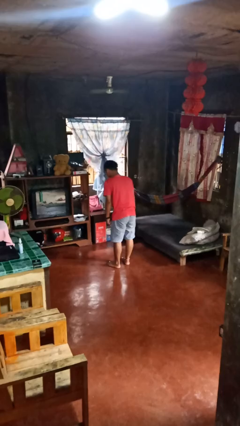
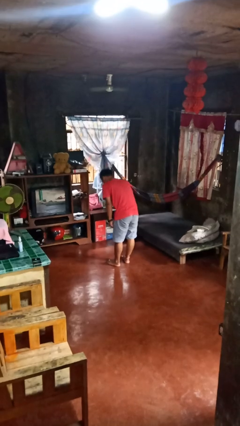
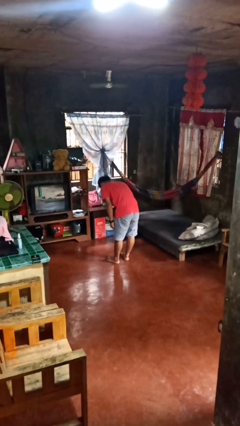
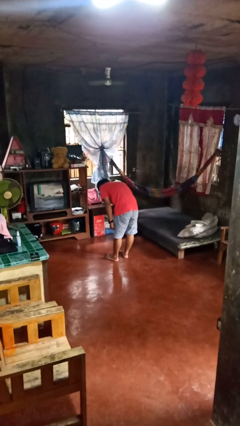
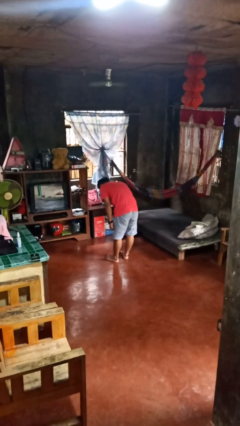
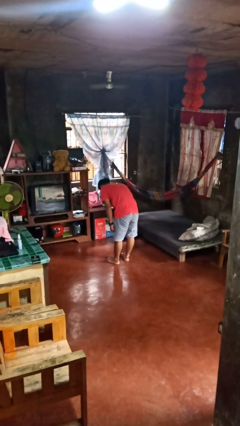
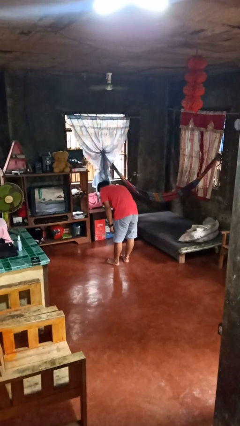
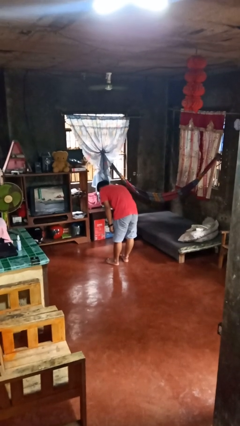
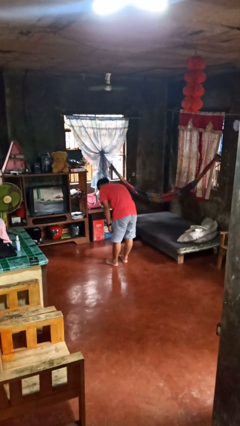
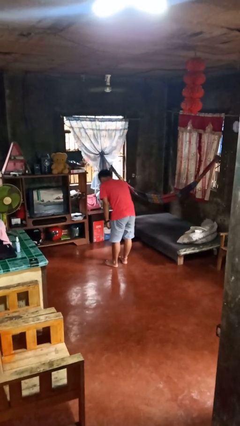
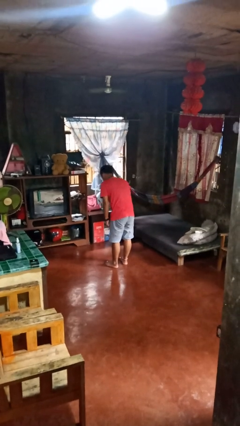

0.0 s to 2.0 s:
person bows

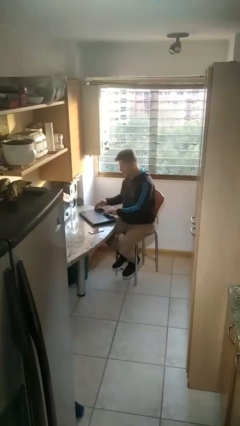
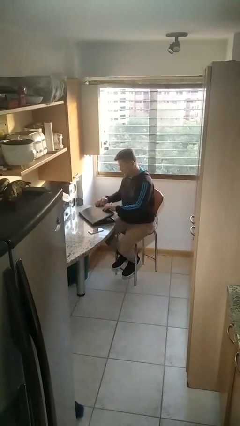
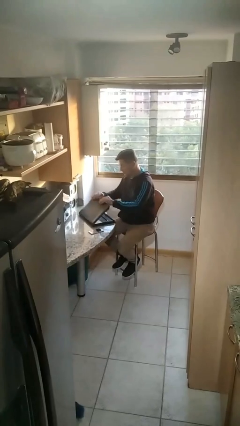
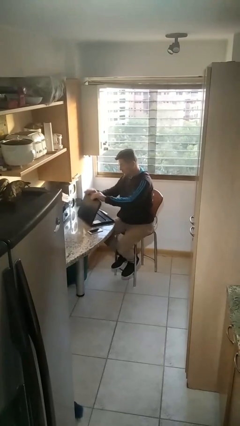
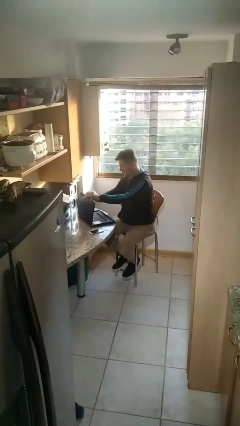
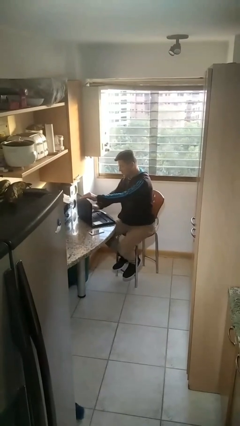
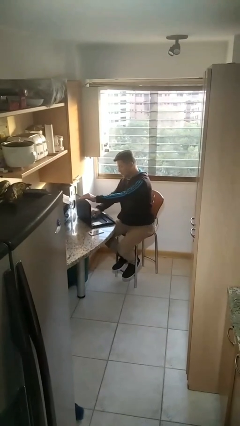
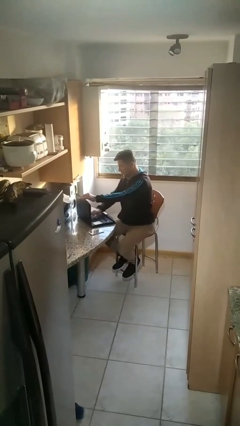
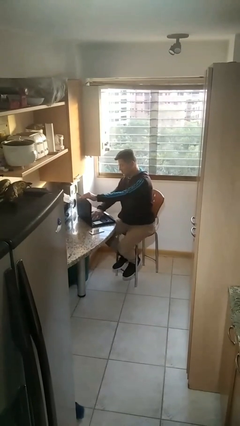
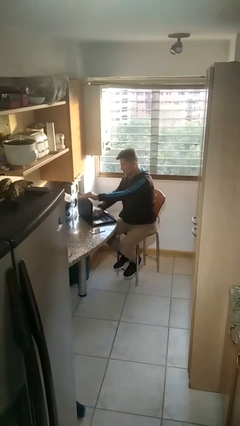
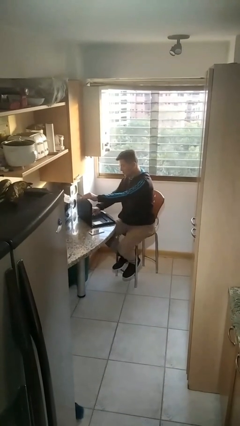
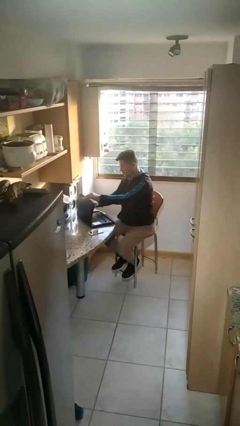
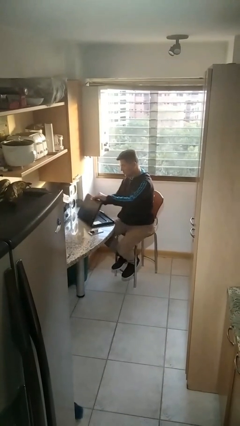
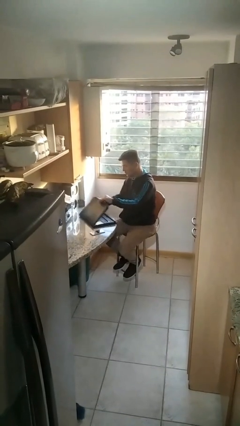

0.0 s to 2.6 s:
person interacts with laptop

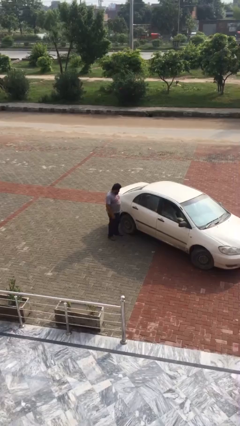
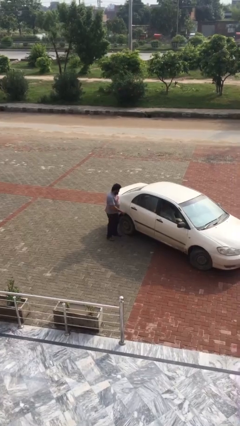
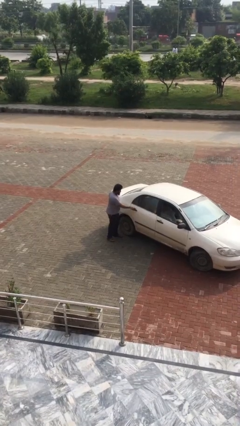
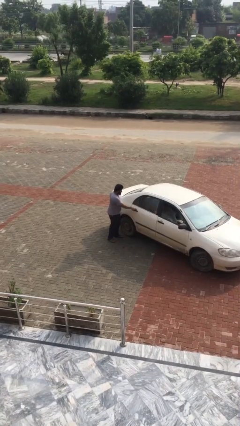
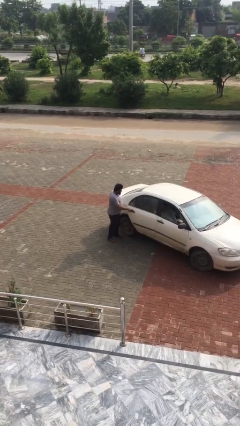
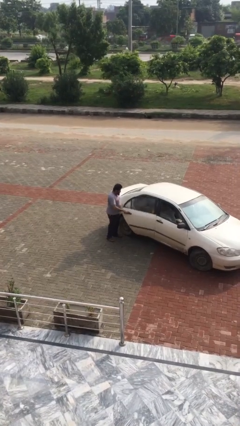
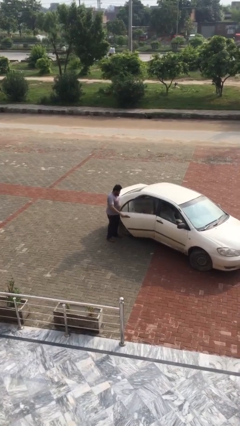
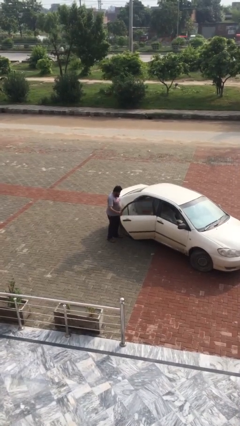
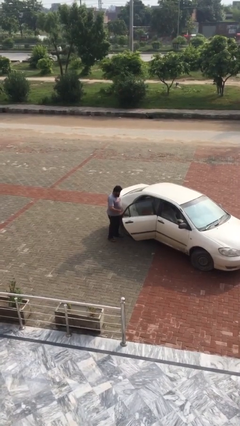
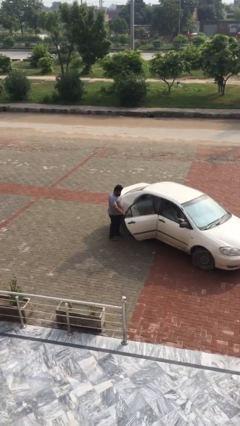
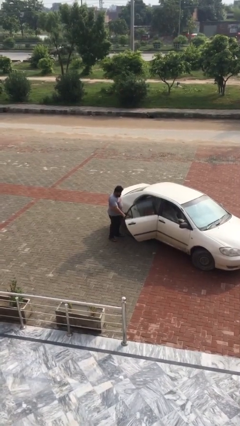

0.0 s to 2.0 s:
person opens car door

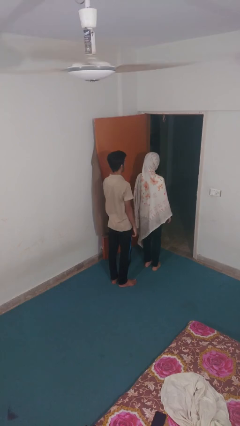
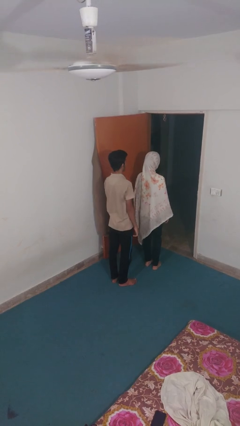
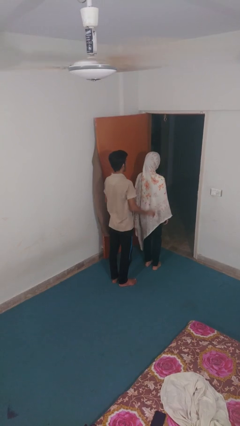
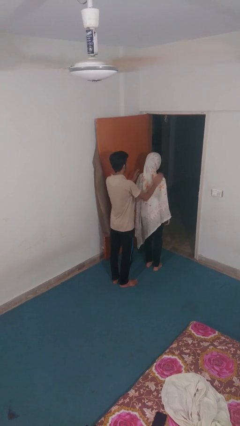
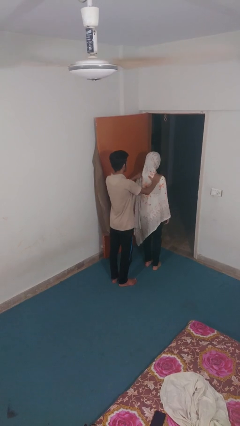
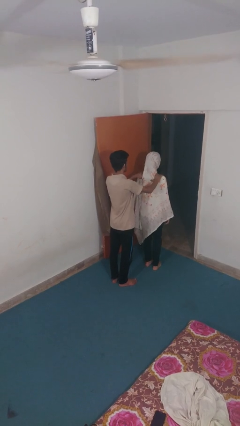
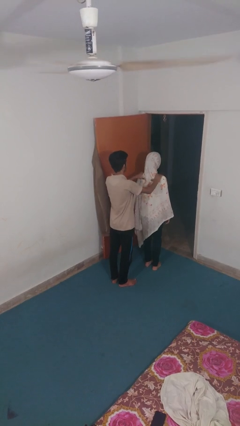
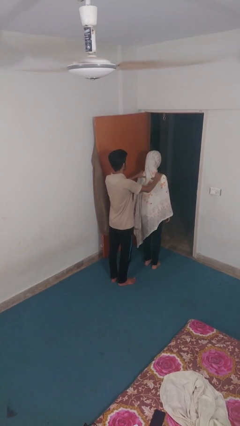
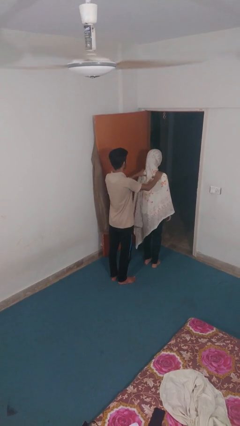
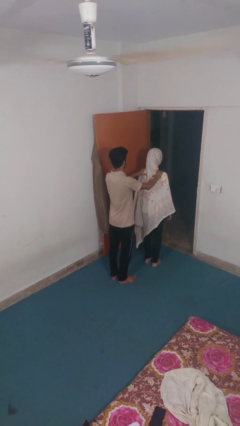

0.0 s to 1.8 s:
person grabs person by shoulder

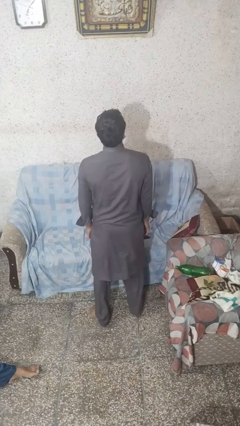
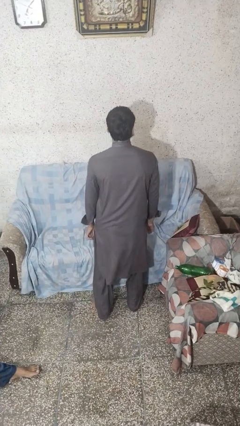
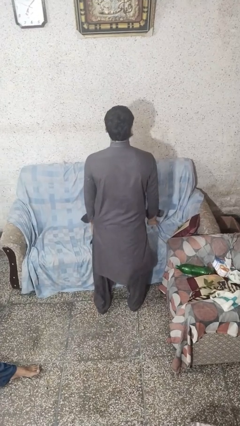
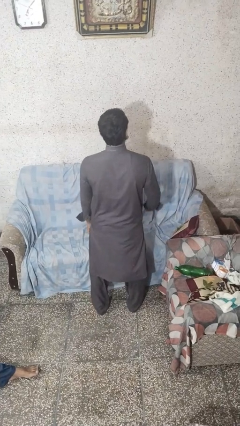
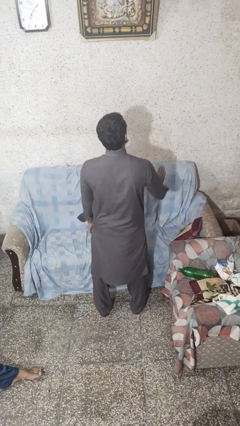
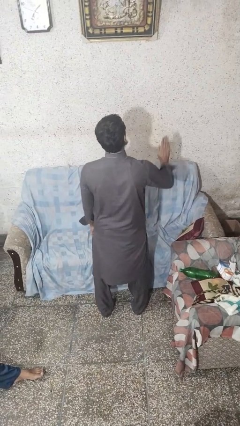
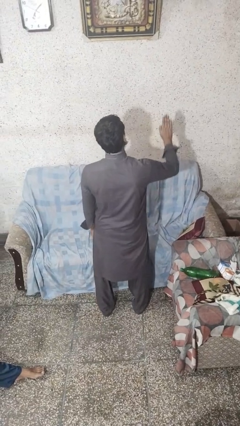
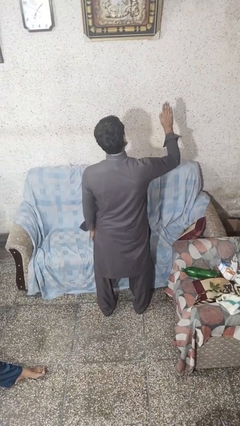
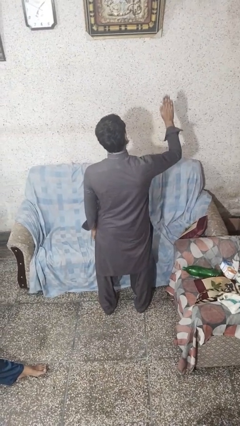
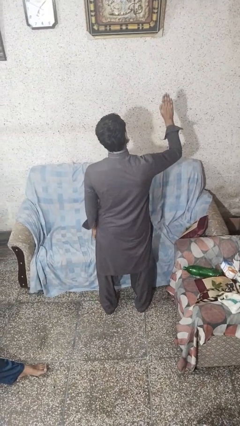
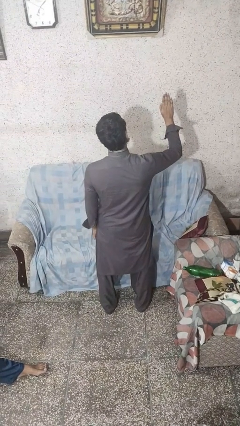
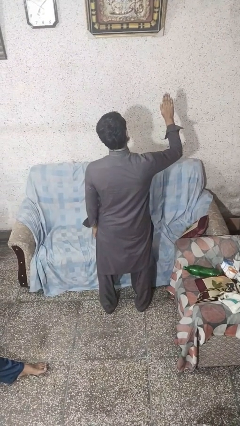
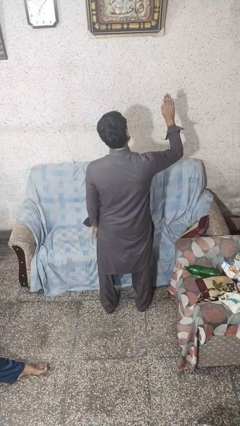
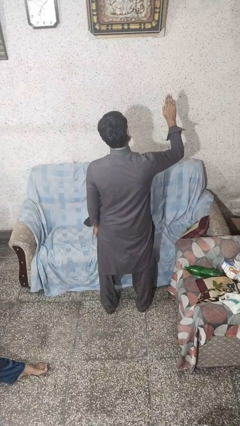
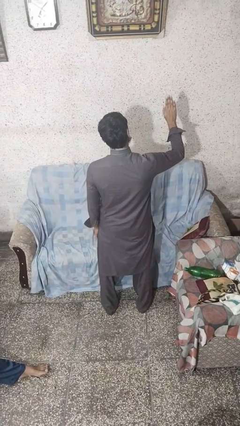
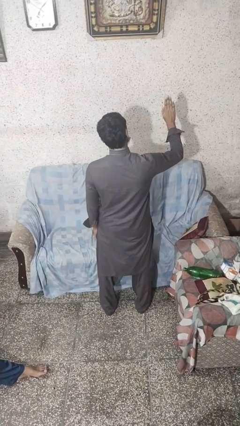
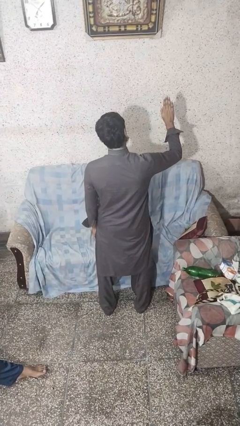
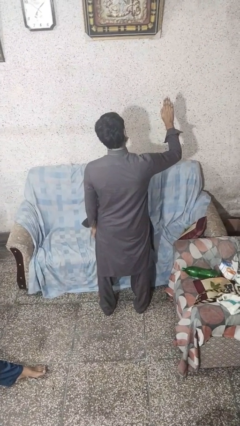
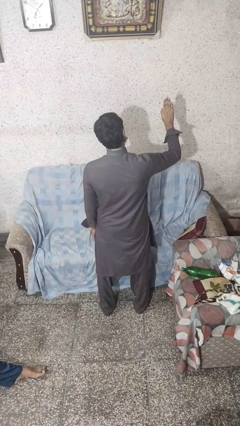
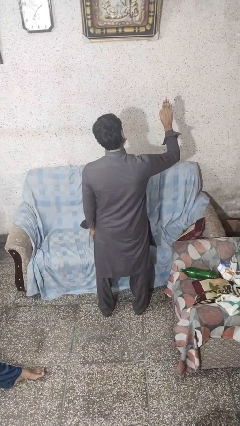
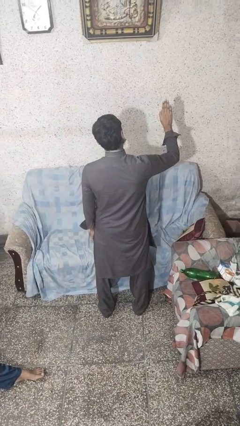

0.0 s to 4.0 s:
person gestures stop

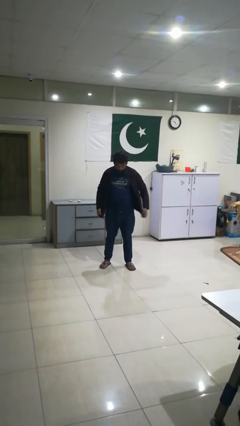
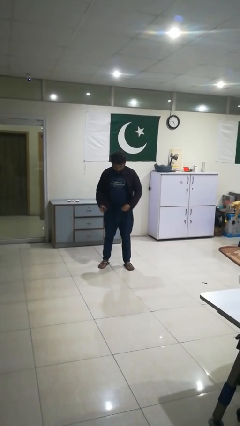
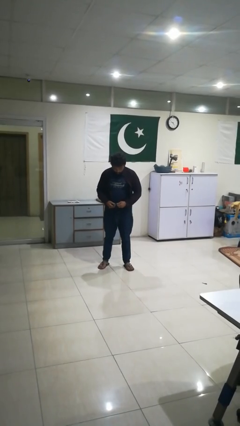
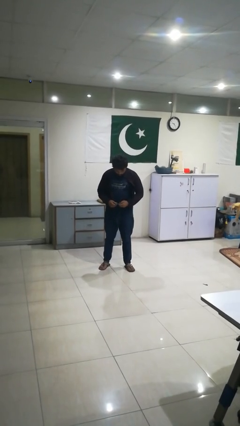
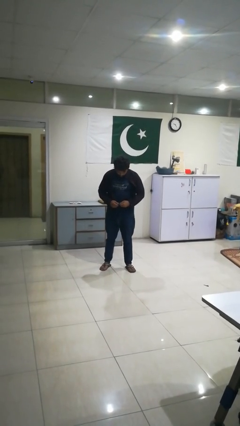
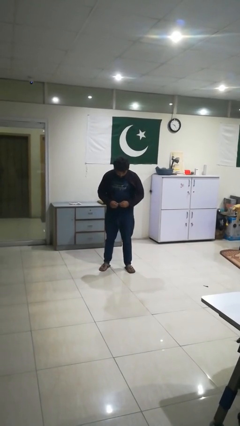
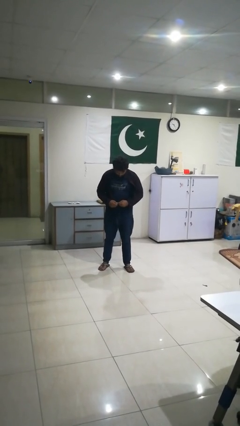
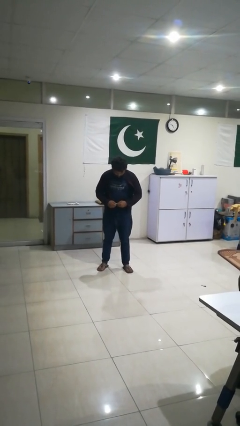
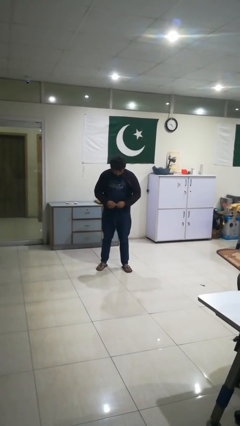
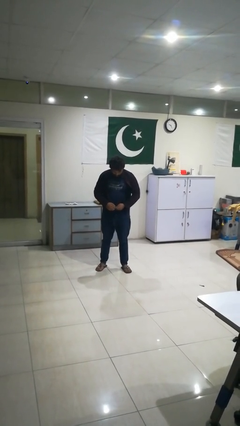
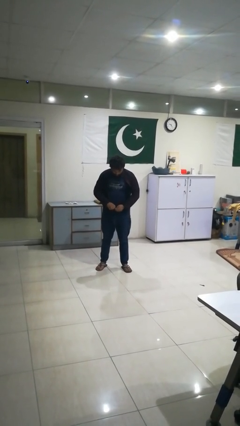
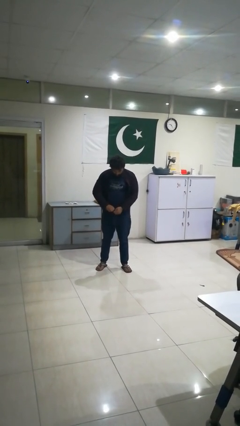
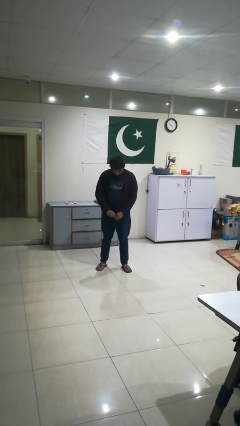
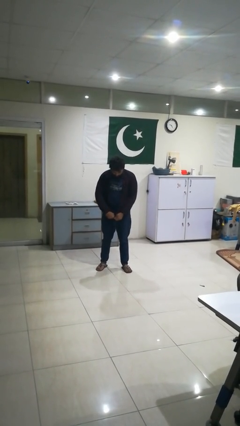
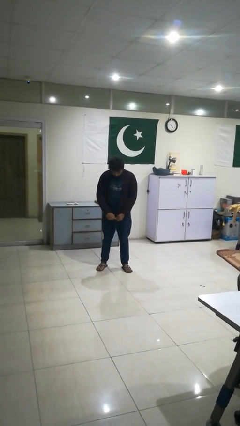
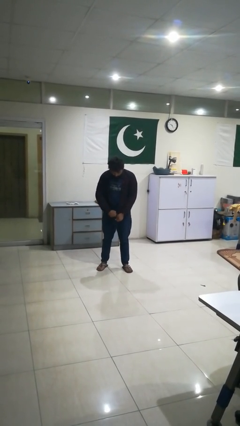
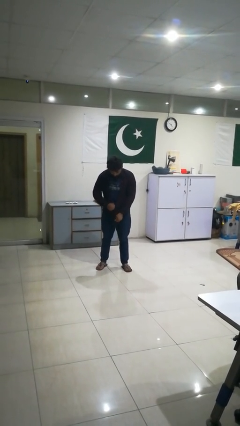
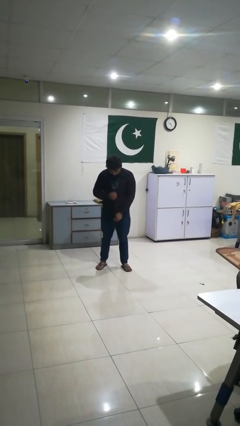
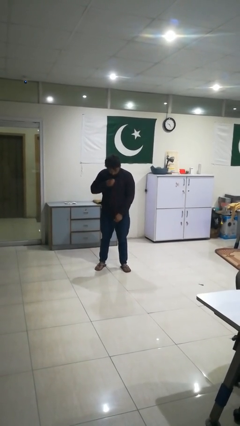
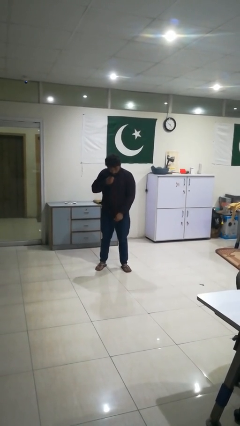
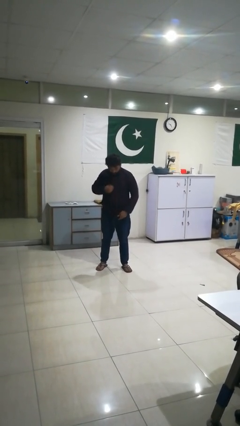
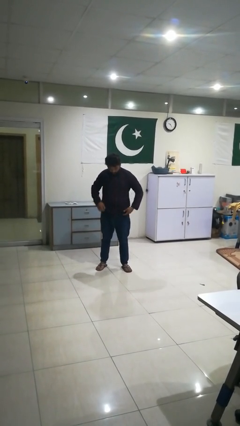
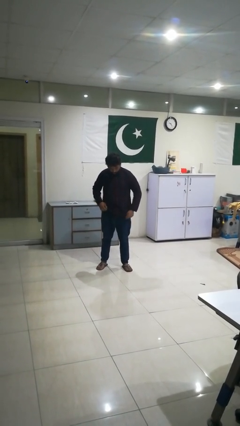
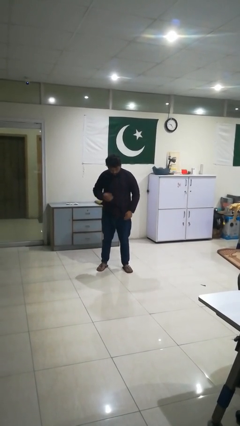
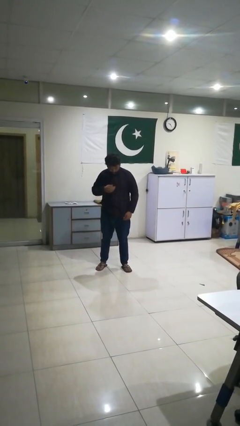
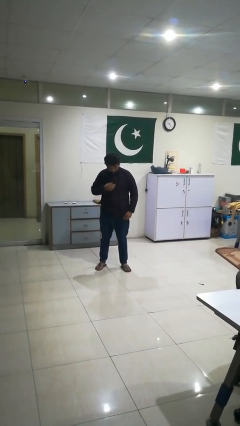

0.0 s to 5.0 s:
person zips up jacket
